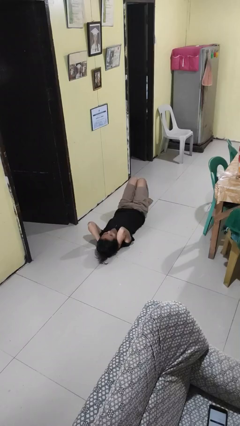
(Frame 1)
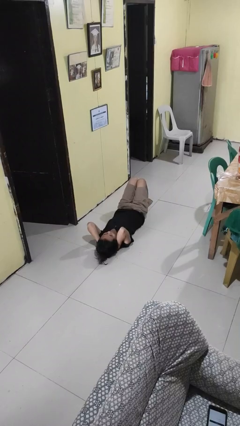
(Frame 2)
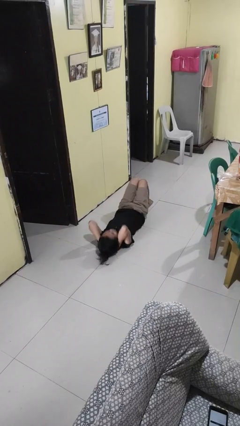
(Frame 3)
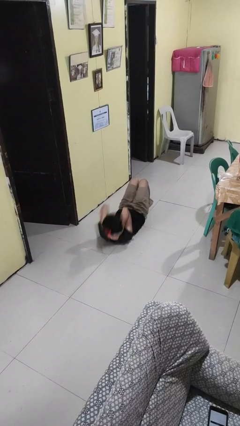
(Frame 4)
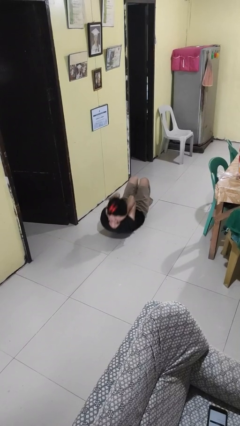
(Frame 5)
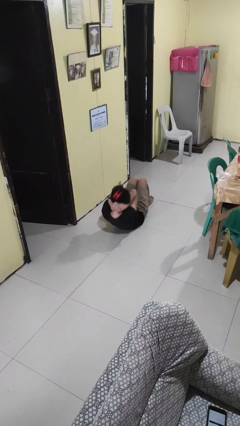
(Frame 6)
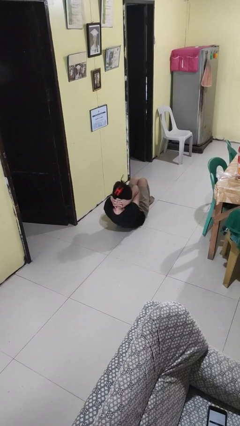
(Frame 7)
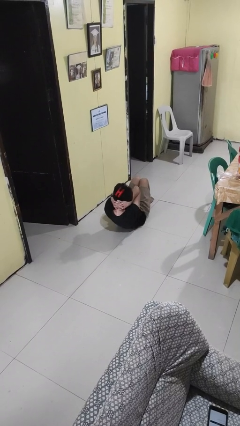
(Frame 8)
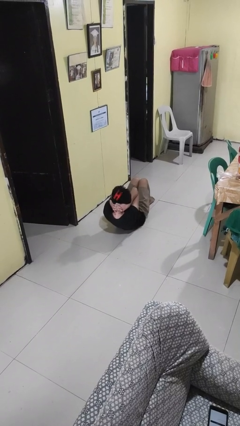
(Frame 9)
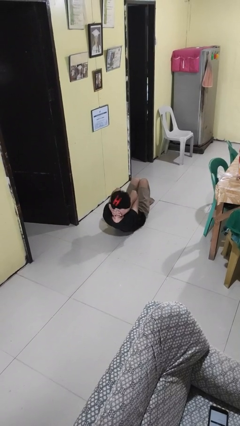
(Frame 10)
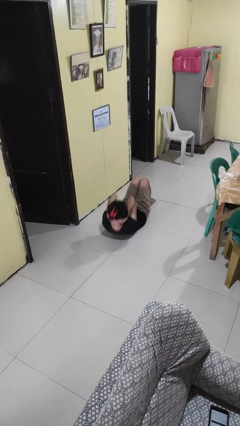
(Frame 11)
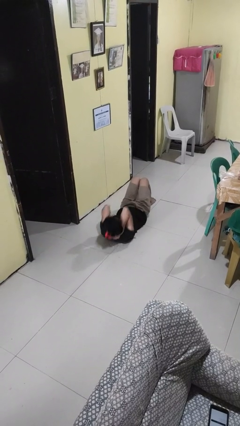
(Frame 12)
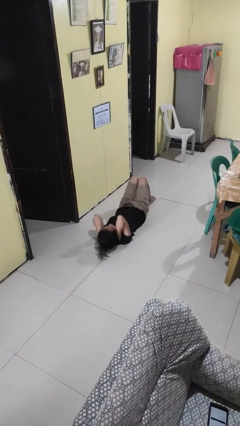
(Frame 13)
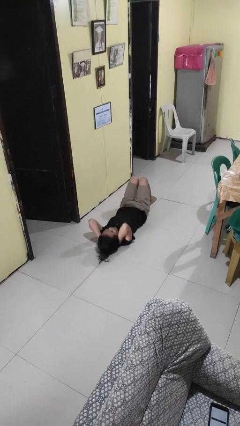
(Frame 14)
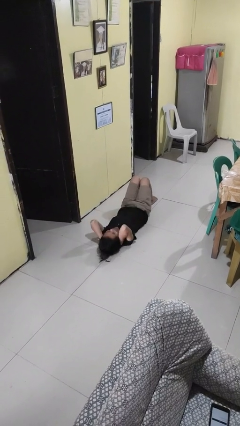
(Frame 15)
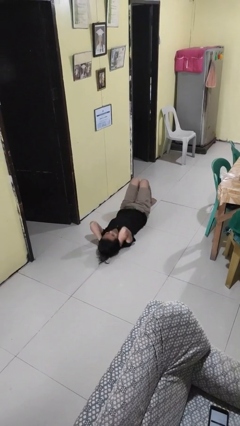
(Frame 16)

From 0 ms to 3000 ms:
person exercises with situp

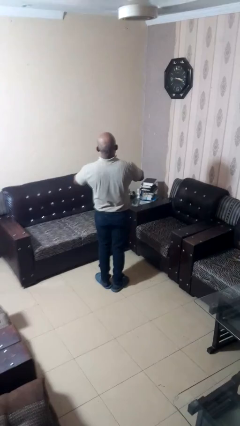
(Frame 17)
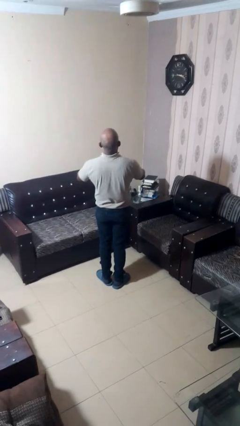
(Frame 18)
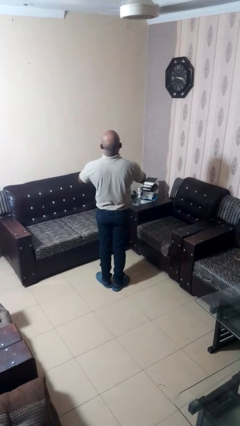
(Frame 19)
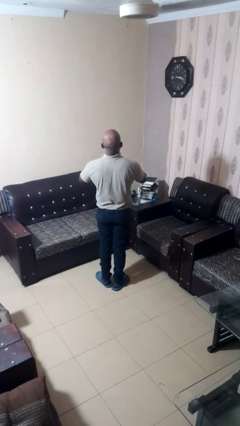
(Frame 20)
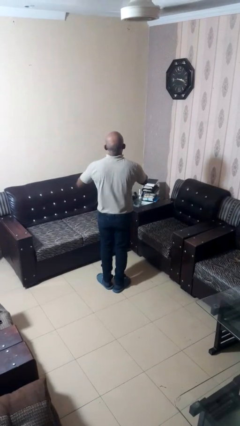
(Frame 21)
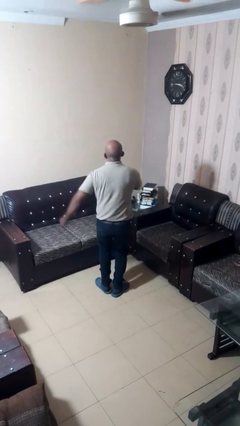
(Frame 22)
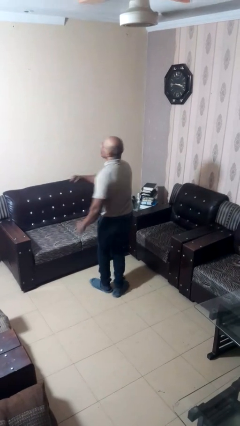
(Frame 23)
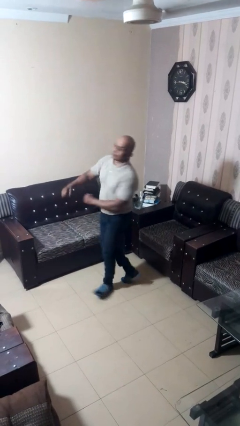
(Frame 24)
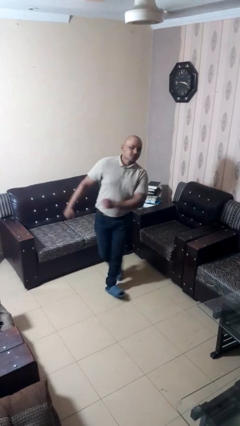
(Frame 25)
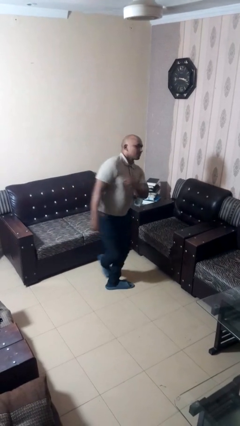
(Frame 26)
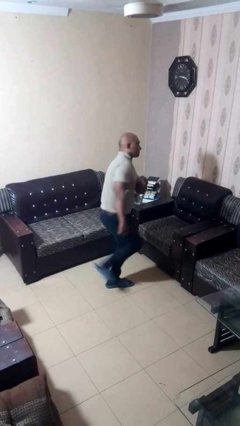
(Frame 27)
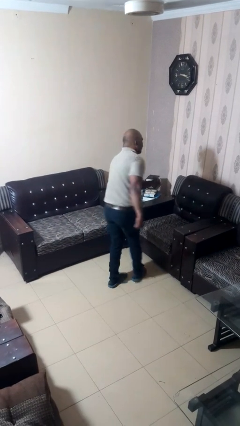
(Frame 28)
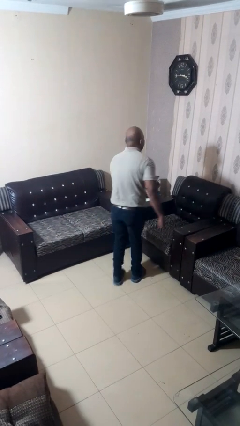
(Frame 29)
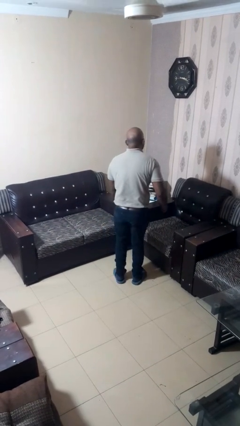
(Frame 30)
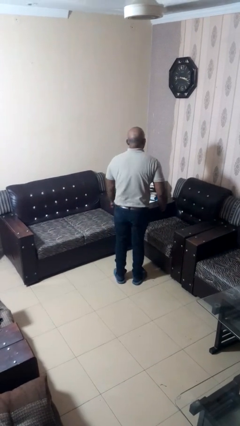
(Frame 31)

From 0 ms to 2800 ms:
person twirls

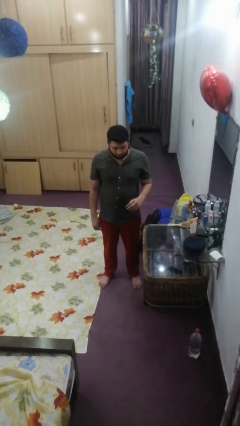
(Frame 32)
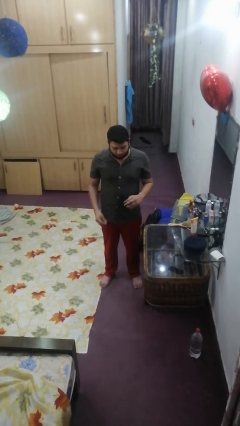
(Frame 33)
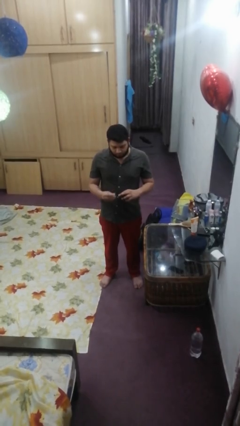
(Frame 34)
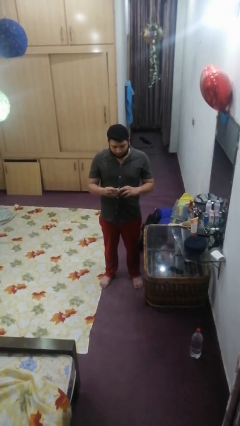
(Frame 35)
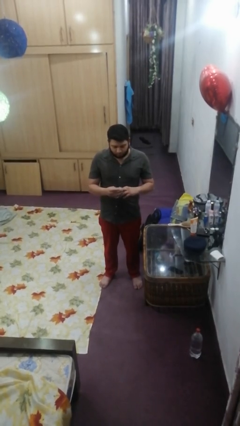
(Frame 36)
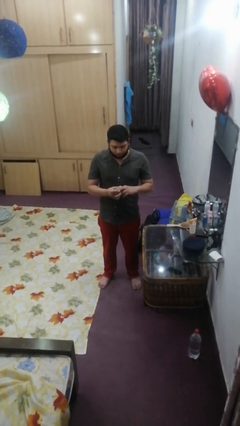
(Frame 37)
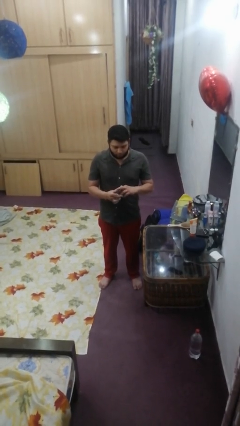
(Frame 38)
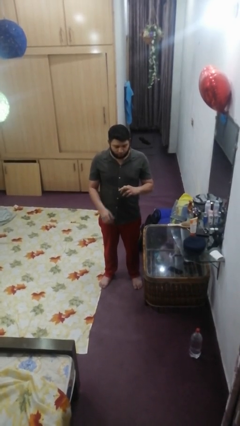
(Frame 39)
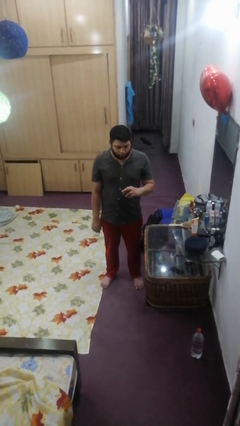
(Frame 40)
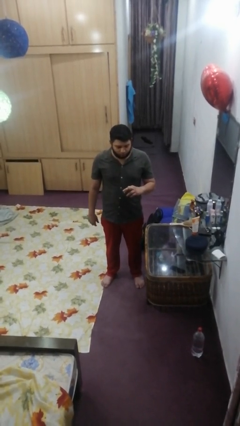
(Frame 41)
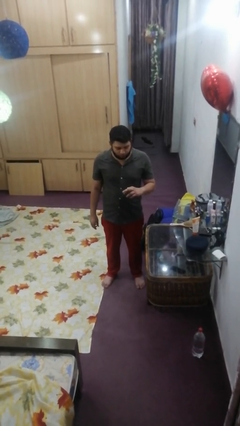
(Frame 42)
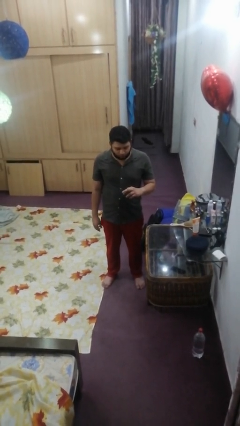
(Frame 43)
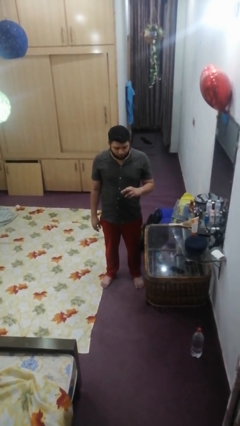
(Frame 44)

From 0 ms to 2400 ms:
person puts on ring

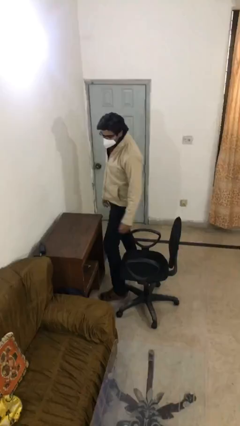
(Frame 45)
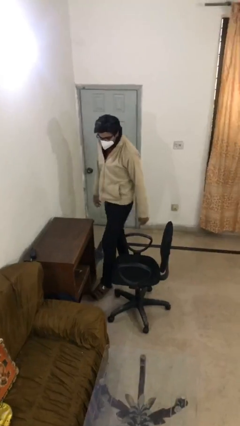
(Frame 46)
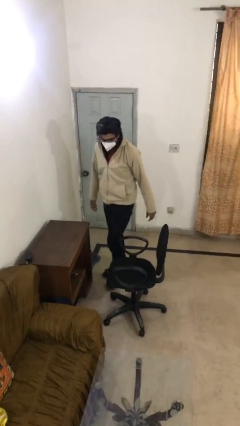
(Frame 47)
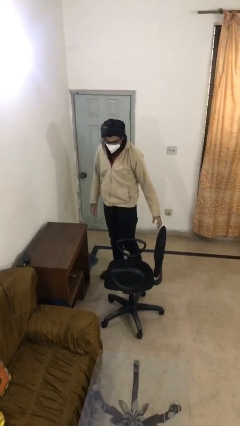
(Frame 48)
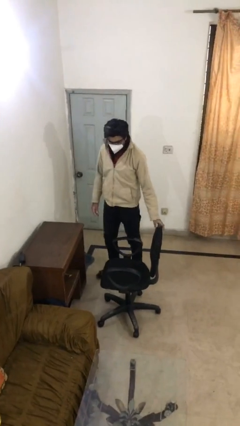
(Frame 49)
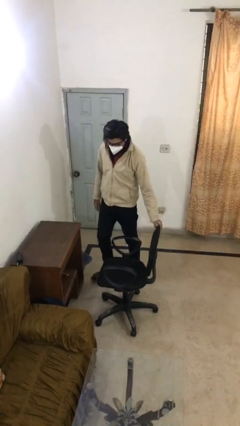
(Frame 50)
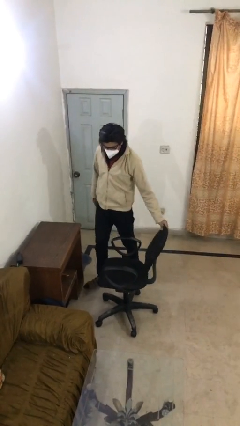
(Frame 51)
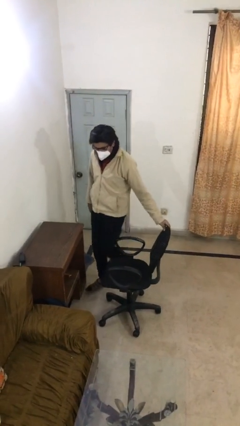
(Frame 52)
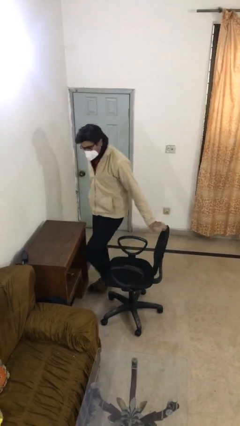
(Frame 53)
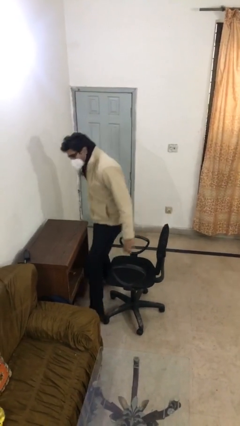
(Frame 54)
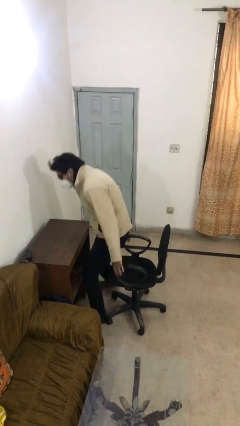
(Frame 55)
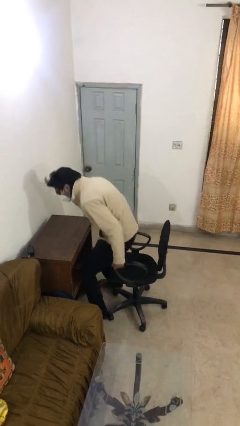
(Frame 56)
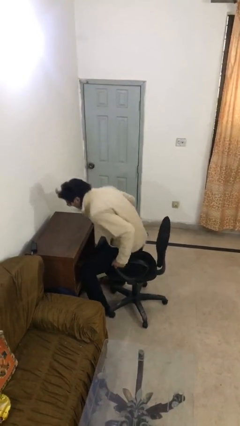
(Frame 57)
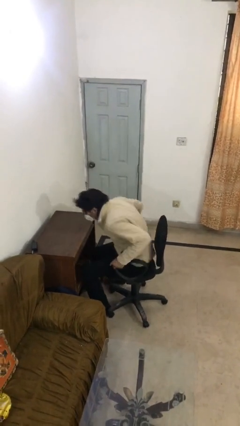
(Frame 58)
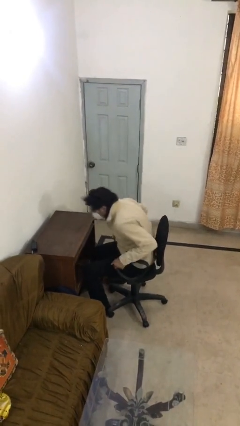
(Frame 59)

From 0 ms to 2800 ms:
person sits down

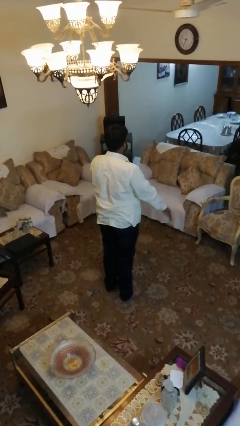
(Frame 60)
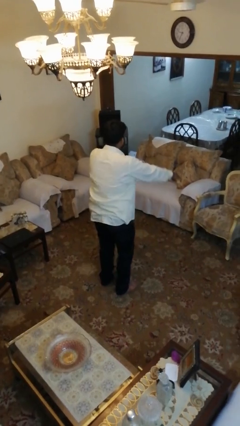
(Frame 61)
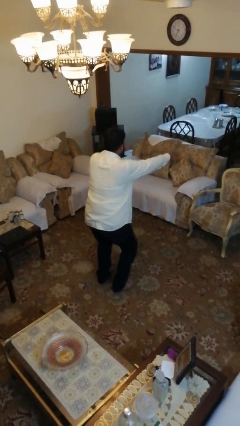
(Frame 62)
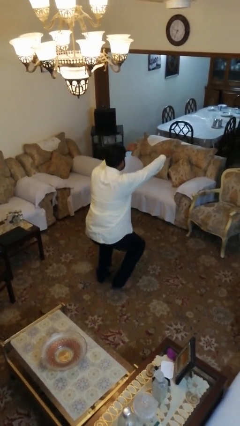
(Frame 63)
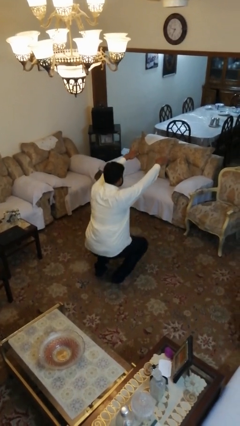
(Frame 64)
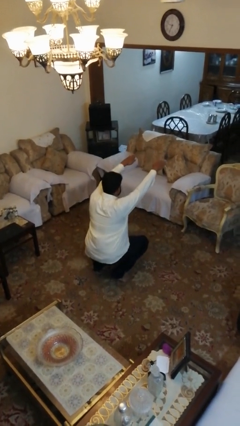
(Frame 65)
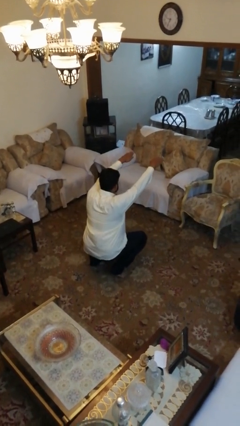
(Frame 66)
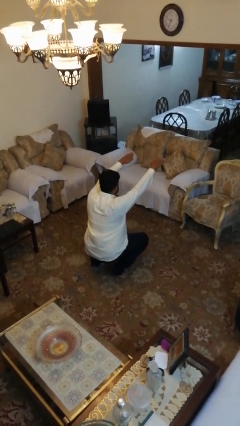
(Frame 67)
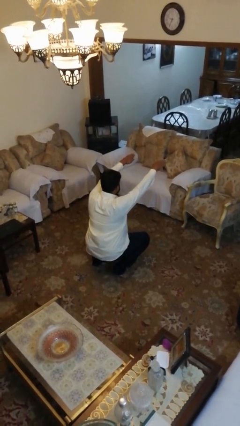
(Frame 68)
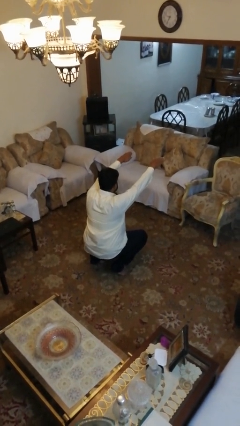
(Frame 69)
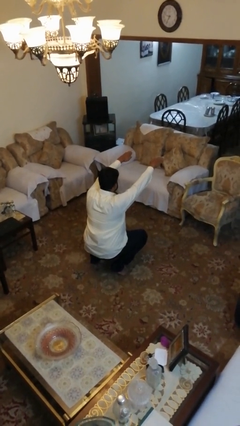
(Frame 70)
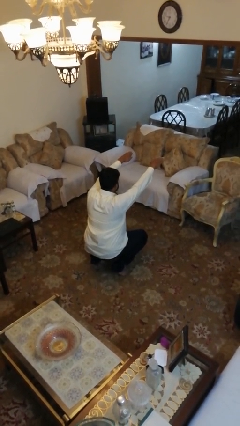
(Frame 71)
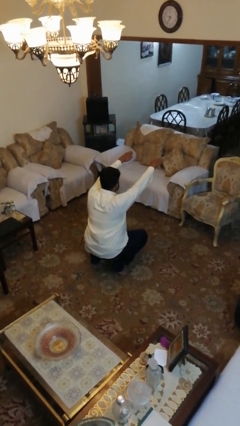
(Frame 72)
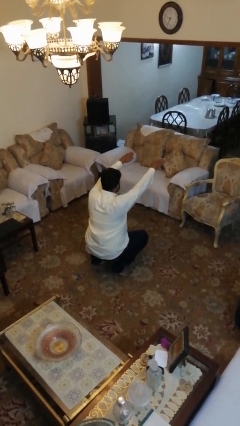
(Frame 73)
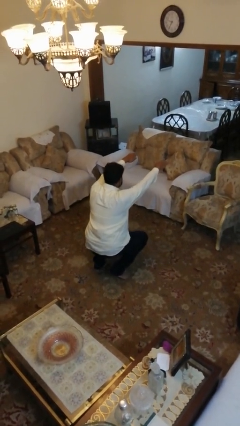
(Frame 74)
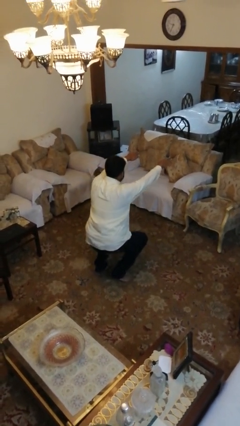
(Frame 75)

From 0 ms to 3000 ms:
person squats

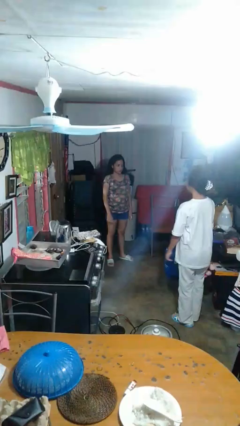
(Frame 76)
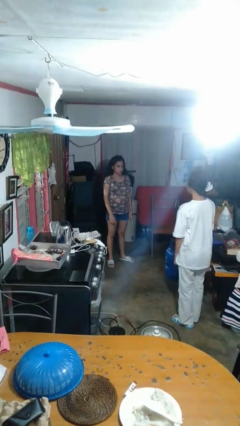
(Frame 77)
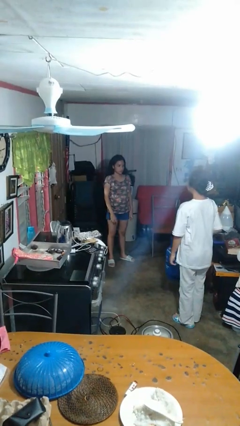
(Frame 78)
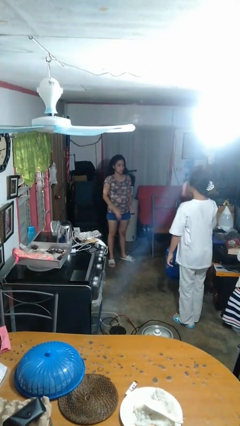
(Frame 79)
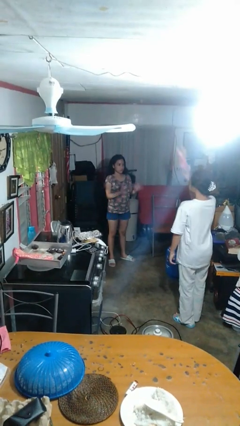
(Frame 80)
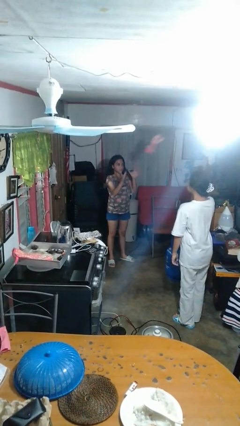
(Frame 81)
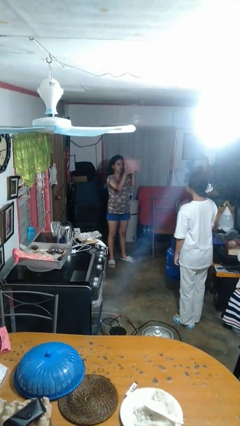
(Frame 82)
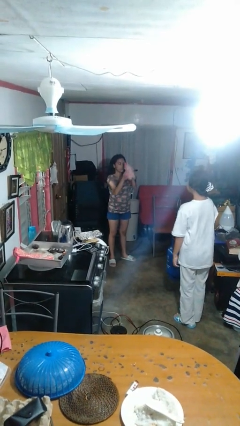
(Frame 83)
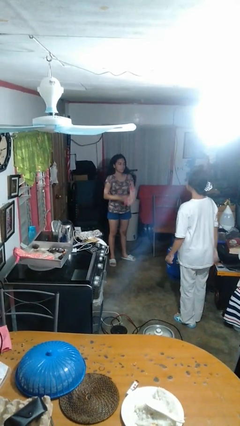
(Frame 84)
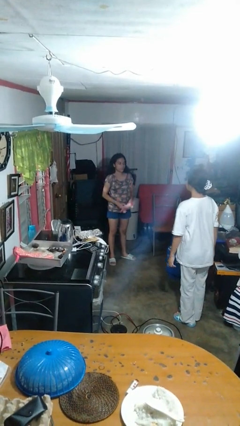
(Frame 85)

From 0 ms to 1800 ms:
person catches object from person

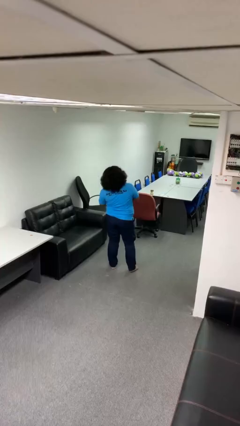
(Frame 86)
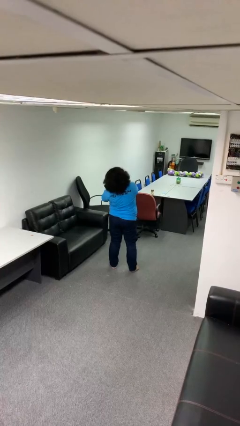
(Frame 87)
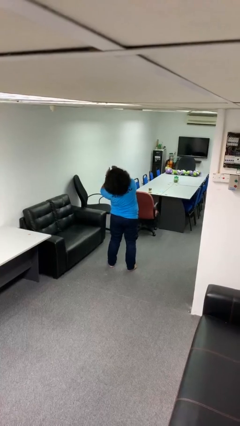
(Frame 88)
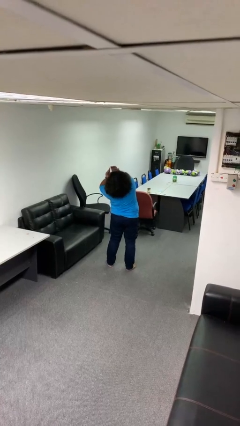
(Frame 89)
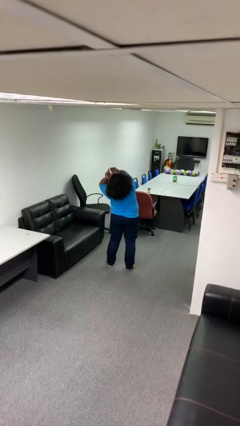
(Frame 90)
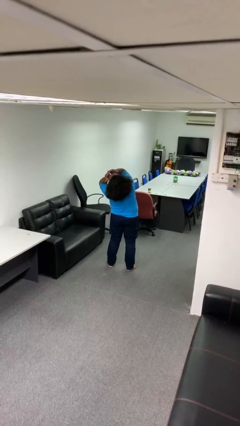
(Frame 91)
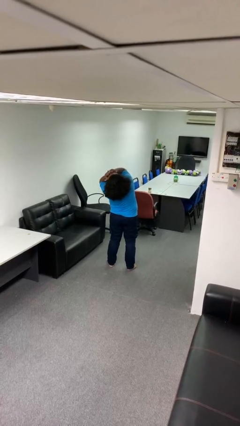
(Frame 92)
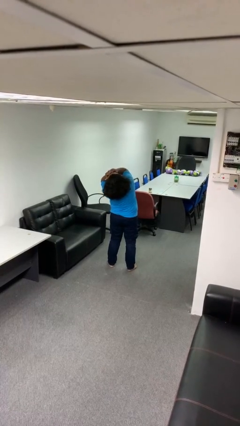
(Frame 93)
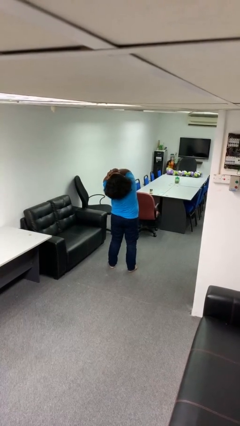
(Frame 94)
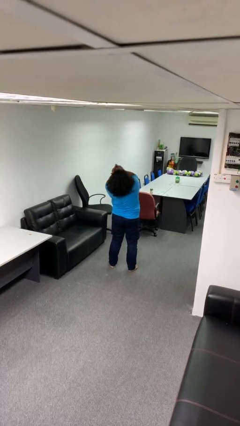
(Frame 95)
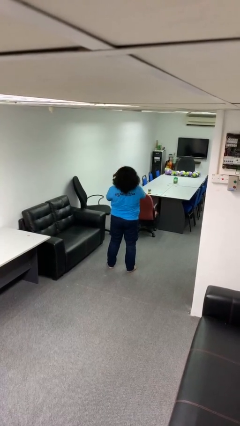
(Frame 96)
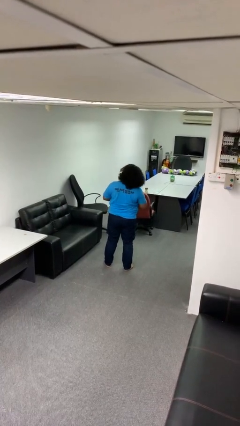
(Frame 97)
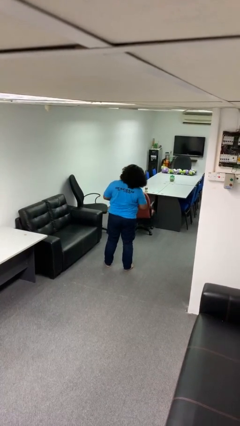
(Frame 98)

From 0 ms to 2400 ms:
person covers face with hands
